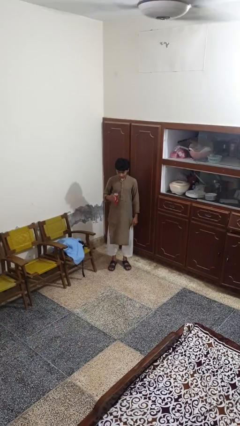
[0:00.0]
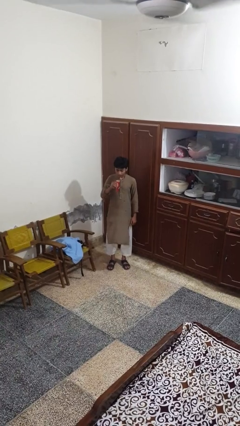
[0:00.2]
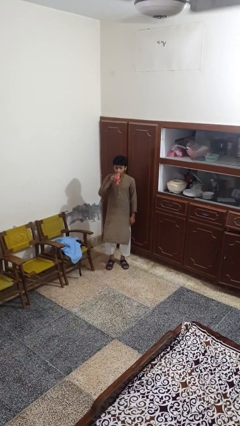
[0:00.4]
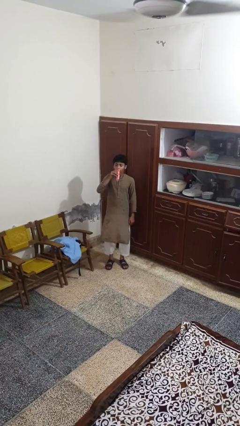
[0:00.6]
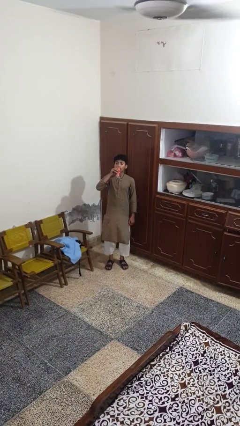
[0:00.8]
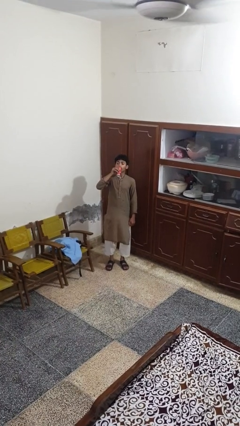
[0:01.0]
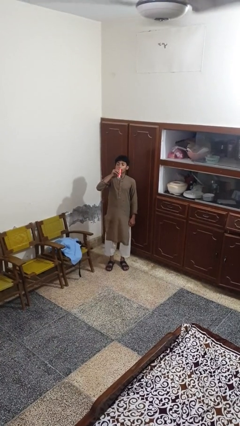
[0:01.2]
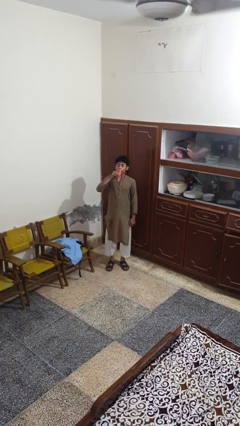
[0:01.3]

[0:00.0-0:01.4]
person drinks from beverage can

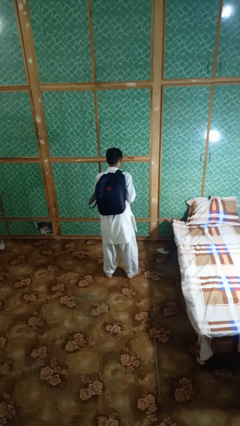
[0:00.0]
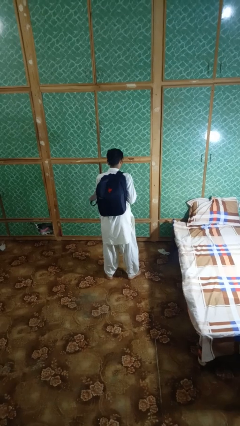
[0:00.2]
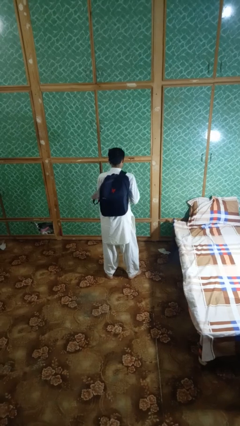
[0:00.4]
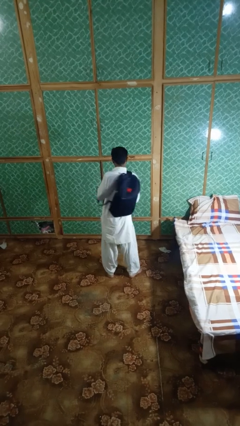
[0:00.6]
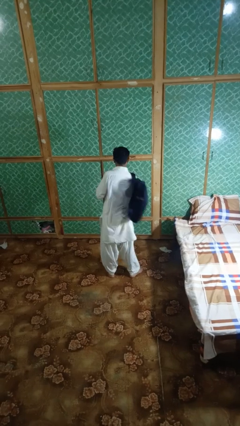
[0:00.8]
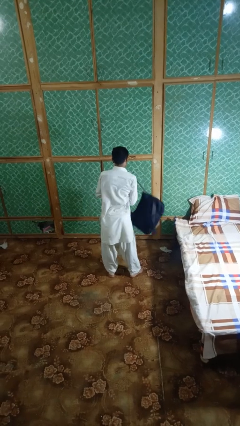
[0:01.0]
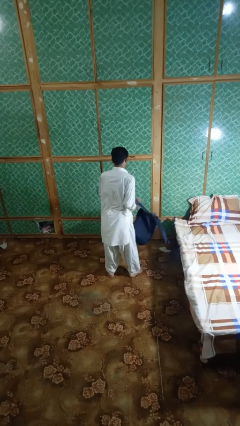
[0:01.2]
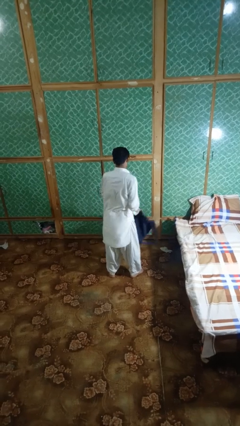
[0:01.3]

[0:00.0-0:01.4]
person takes off backpack

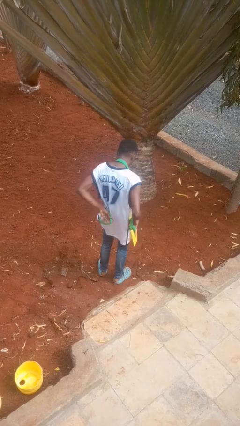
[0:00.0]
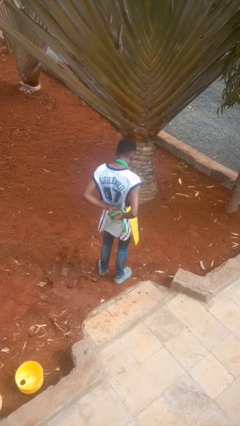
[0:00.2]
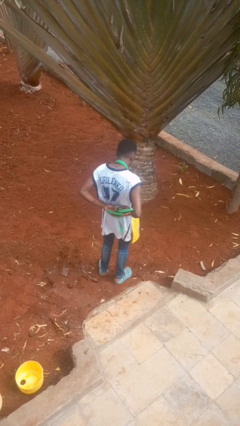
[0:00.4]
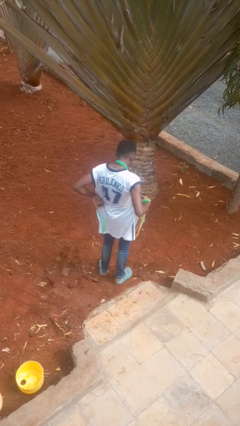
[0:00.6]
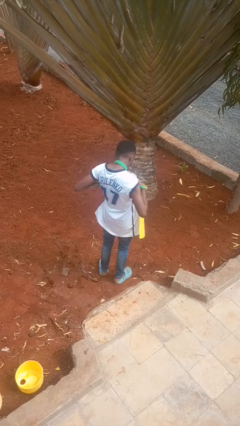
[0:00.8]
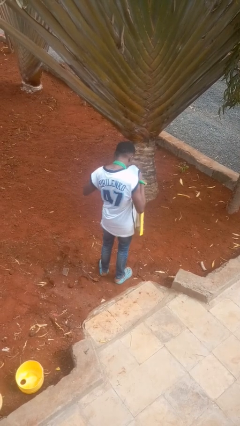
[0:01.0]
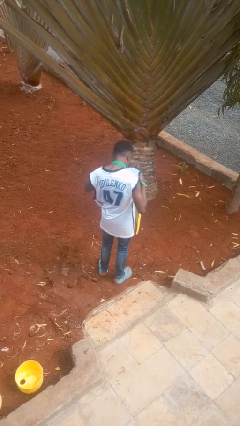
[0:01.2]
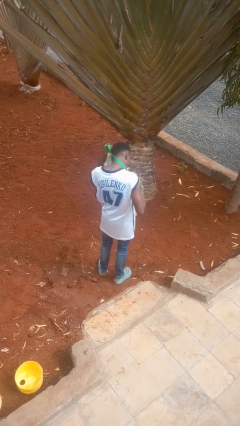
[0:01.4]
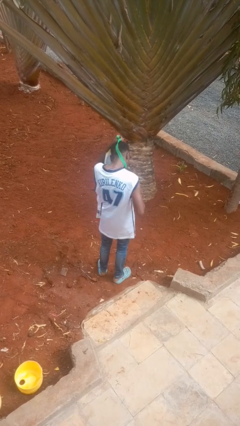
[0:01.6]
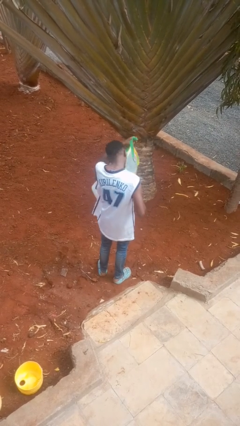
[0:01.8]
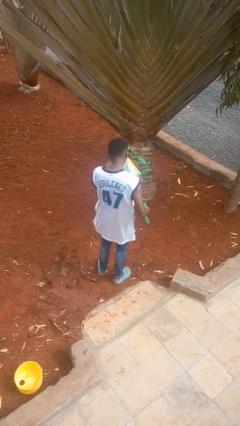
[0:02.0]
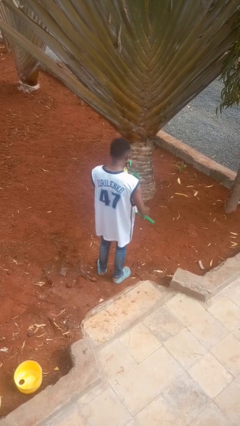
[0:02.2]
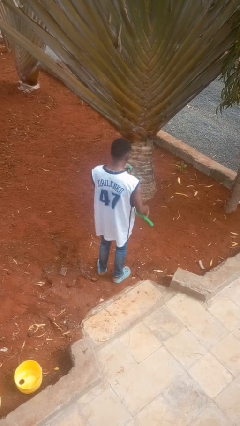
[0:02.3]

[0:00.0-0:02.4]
person takes off apron

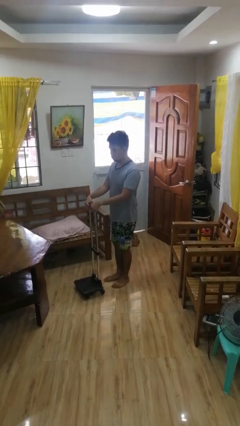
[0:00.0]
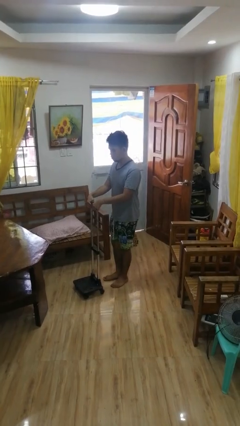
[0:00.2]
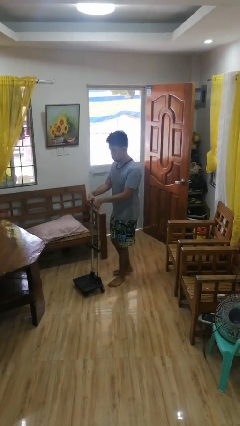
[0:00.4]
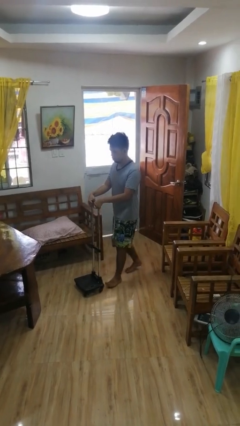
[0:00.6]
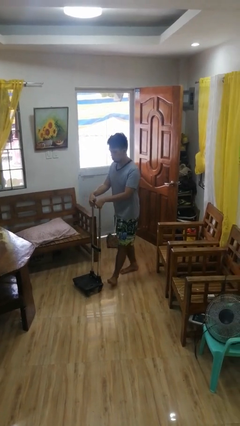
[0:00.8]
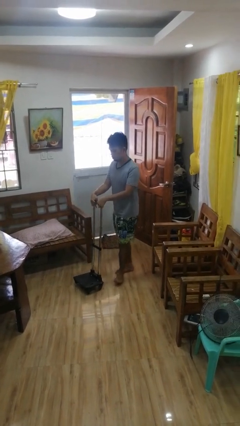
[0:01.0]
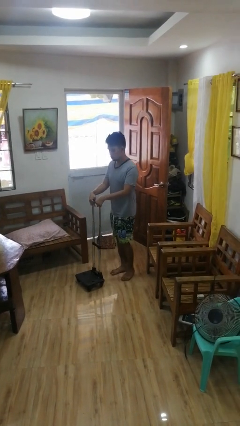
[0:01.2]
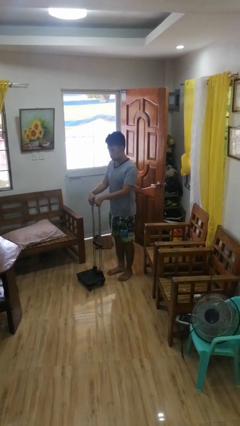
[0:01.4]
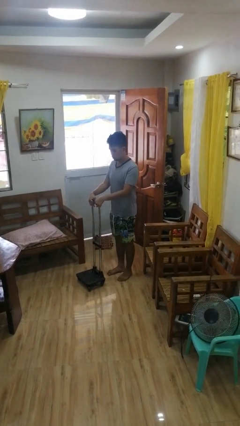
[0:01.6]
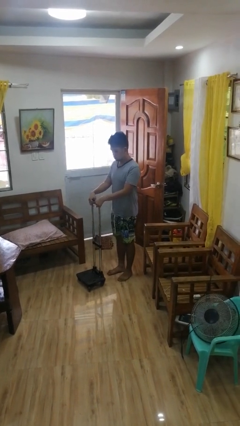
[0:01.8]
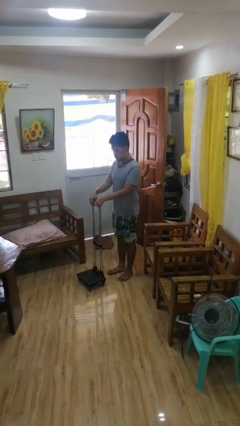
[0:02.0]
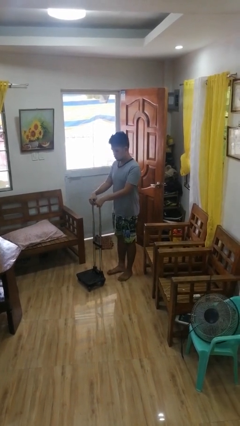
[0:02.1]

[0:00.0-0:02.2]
person pulls wheeled cart

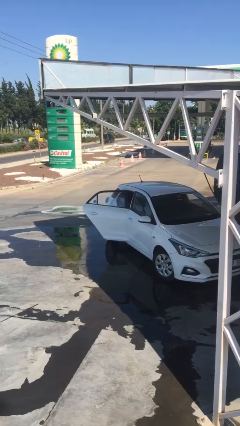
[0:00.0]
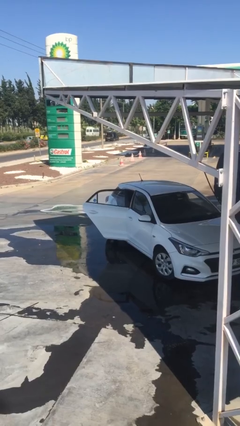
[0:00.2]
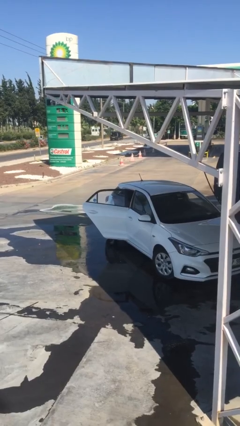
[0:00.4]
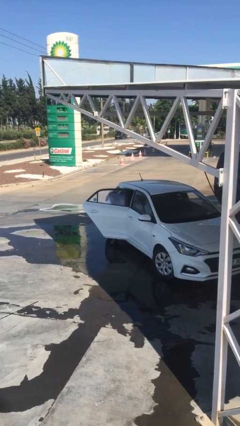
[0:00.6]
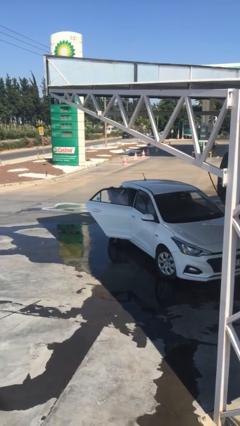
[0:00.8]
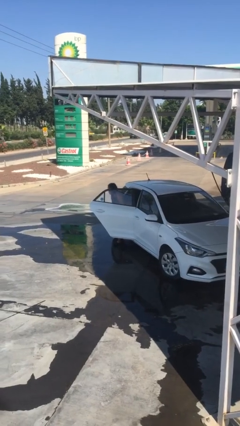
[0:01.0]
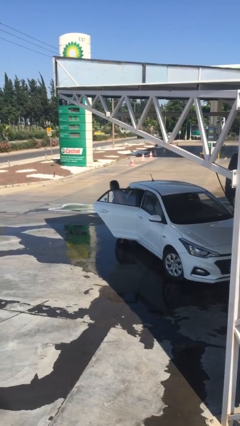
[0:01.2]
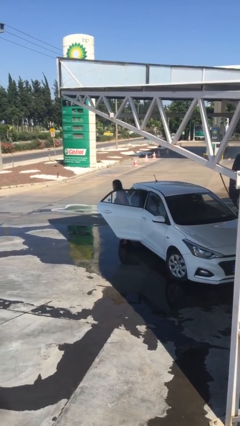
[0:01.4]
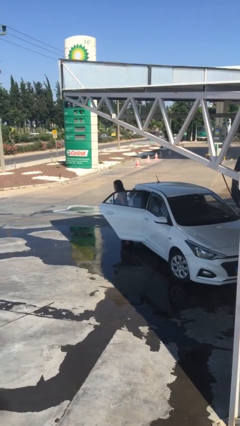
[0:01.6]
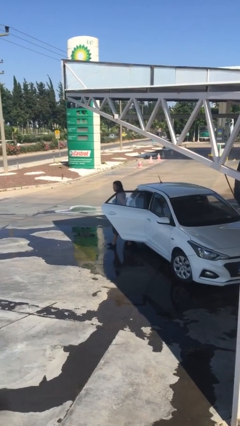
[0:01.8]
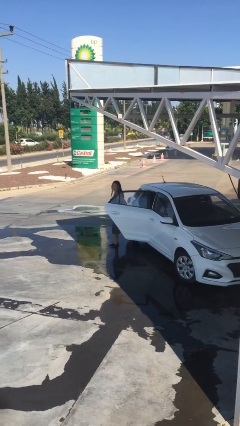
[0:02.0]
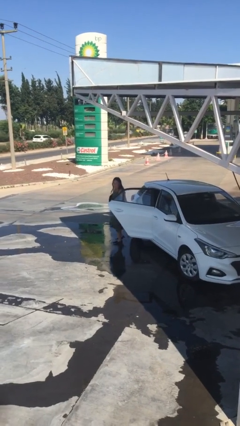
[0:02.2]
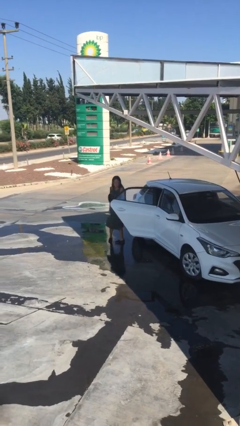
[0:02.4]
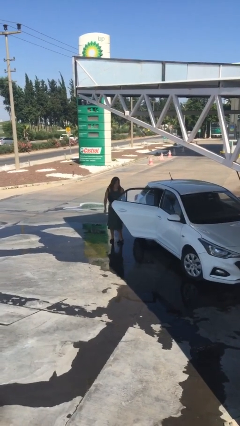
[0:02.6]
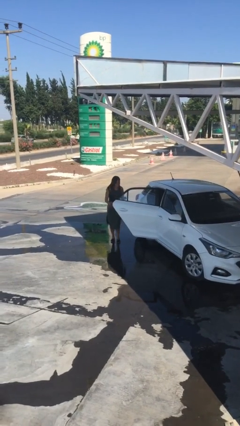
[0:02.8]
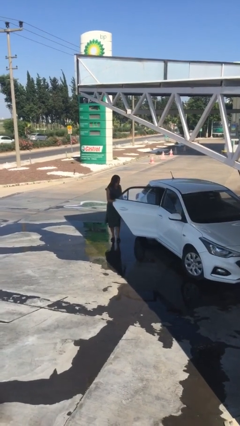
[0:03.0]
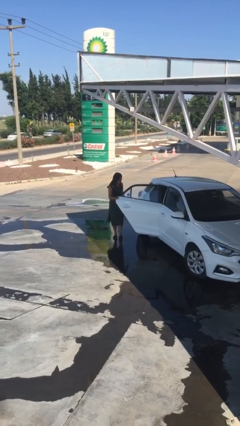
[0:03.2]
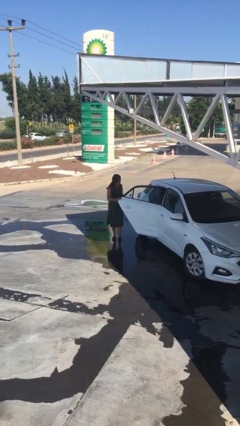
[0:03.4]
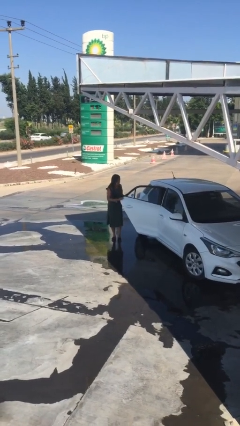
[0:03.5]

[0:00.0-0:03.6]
person exits car

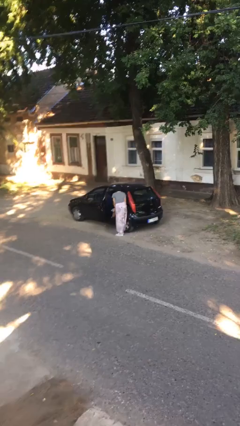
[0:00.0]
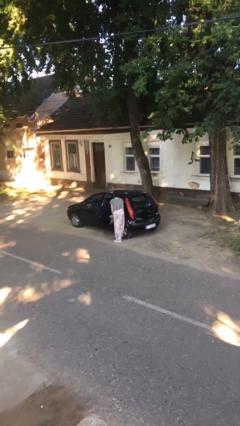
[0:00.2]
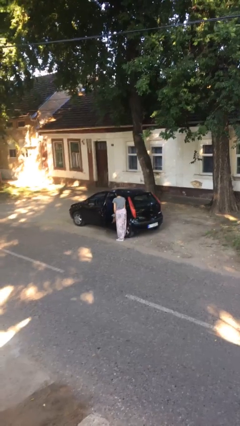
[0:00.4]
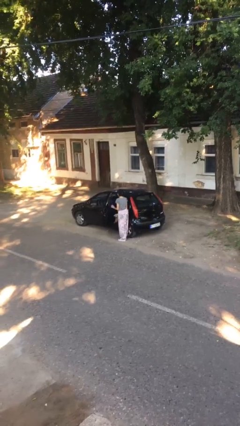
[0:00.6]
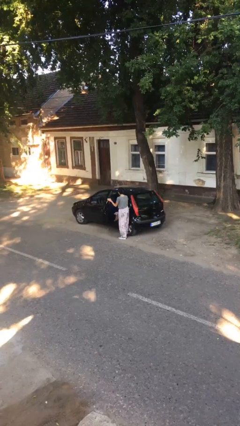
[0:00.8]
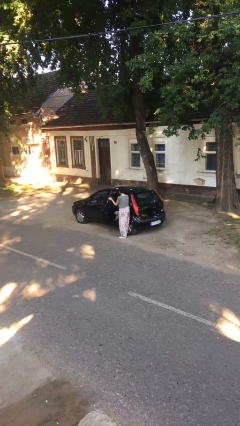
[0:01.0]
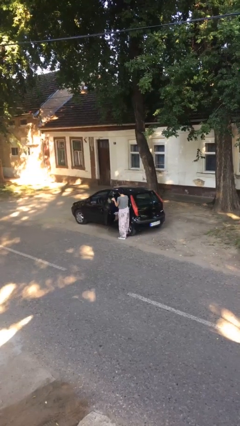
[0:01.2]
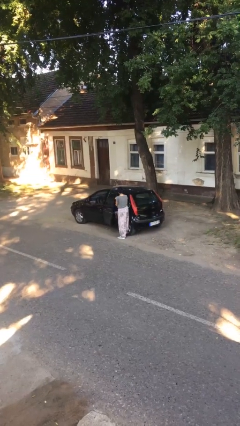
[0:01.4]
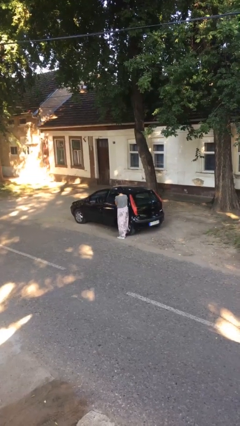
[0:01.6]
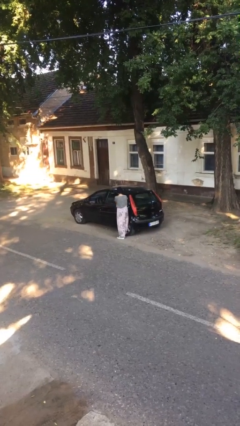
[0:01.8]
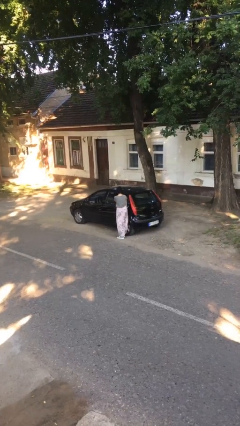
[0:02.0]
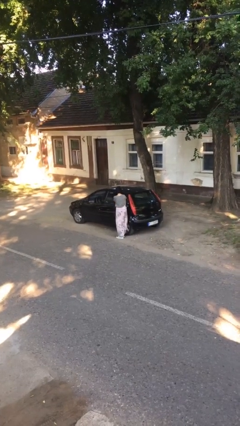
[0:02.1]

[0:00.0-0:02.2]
person closes car door

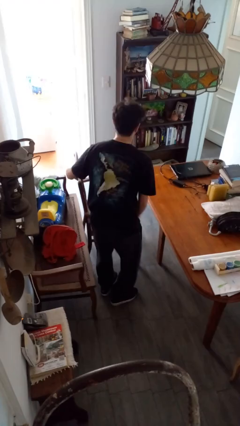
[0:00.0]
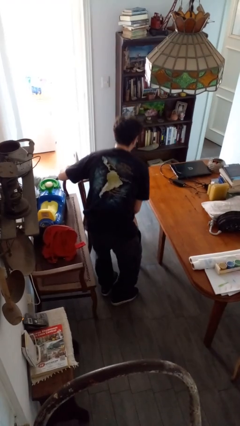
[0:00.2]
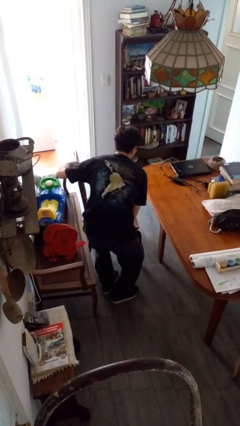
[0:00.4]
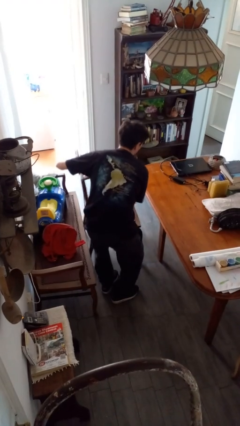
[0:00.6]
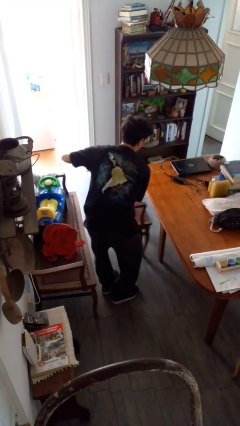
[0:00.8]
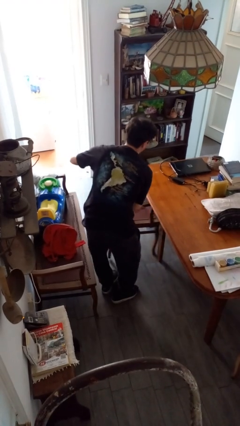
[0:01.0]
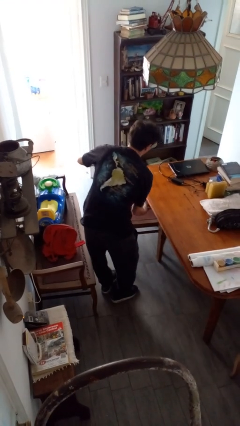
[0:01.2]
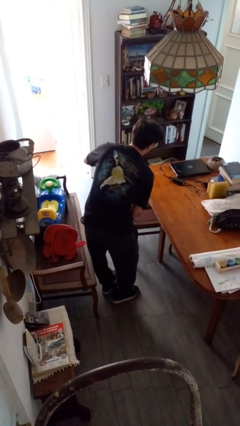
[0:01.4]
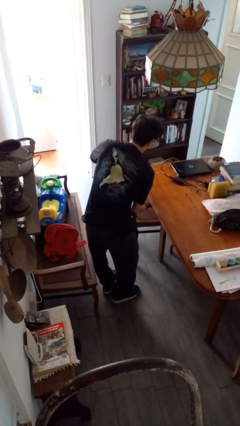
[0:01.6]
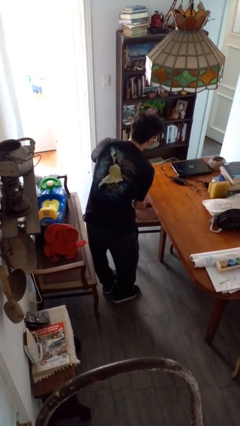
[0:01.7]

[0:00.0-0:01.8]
person pushes in chair

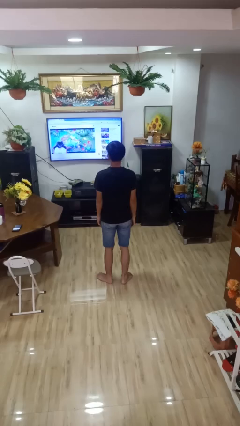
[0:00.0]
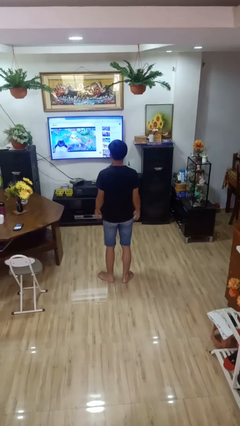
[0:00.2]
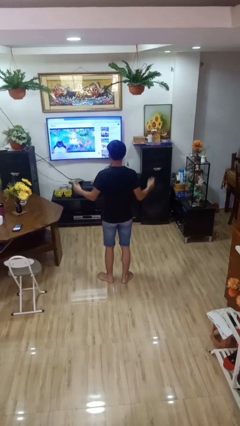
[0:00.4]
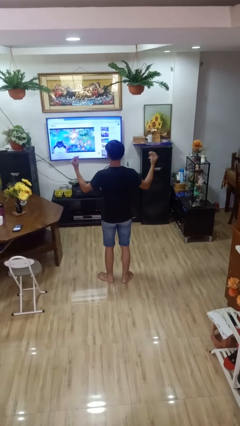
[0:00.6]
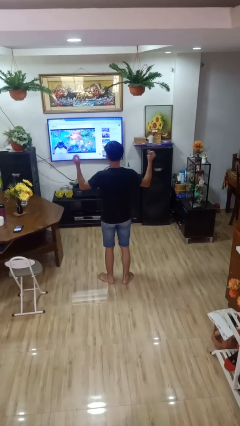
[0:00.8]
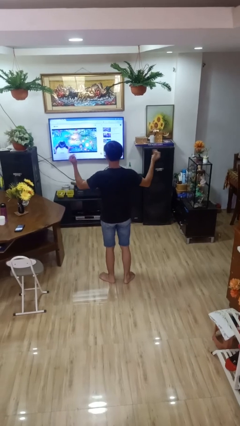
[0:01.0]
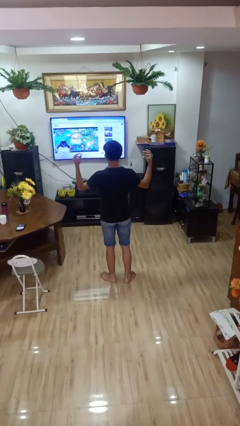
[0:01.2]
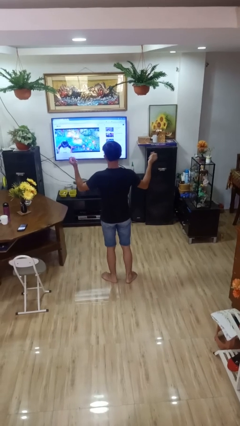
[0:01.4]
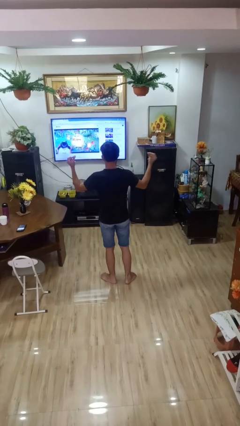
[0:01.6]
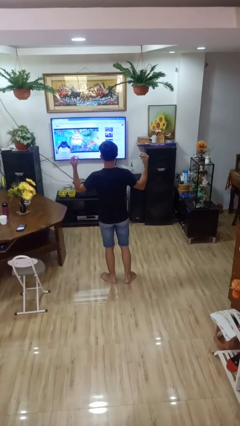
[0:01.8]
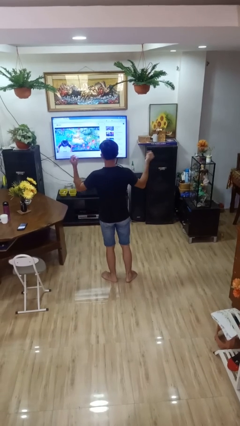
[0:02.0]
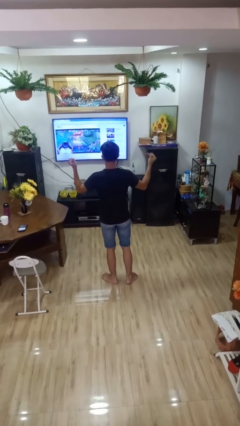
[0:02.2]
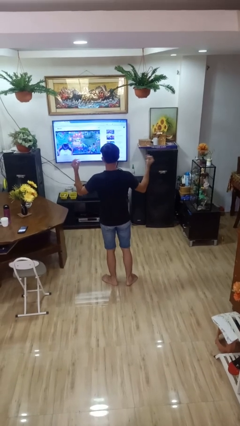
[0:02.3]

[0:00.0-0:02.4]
person snaps fingers
